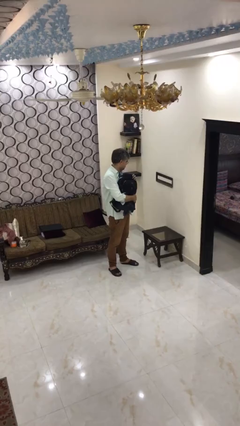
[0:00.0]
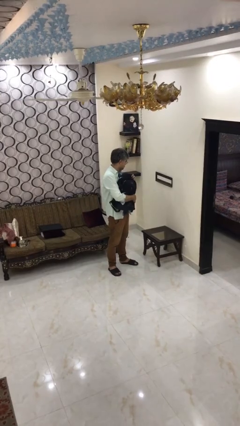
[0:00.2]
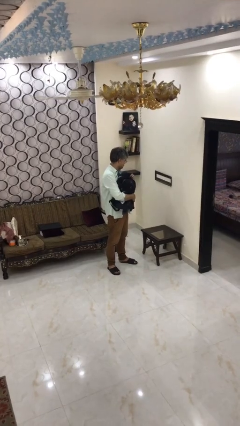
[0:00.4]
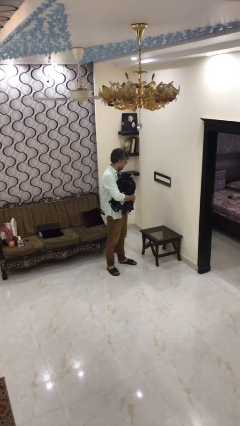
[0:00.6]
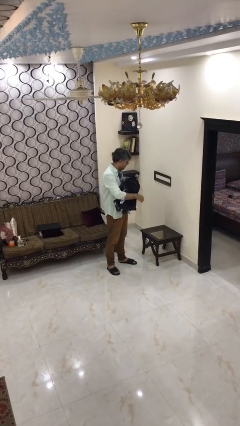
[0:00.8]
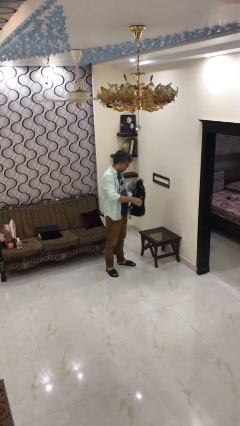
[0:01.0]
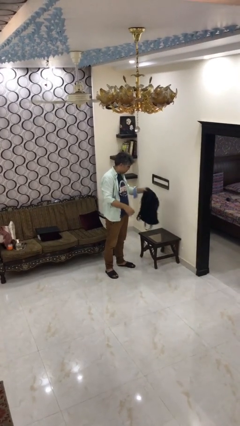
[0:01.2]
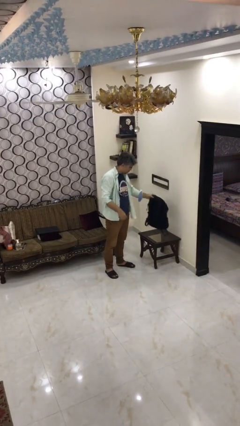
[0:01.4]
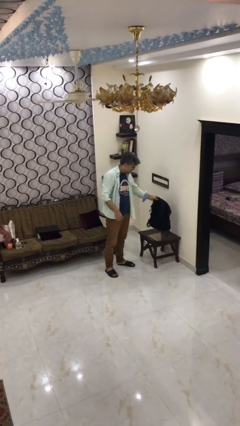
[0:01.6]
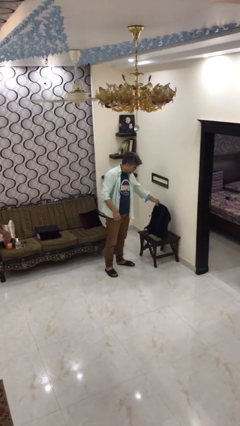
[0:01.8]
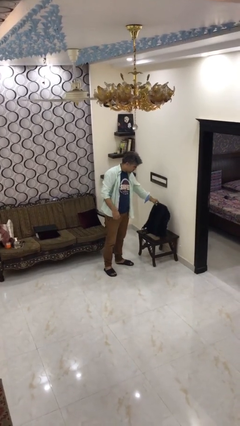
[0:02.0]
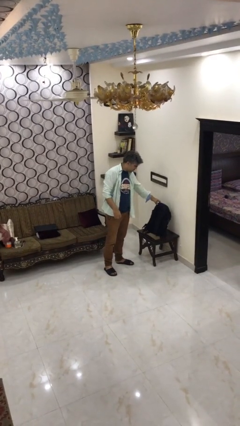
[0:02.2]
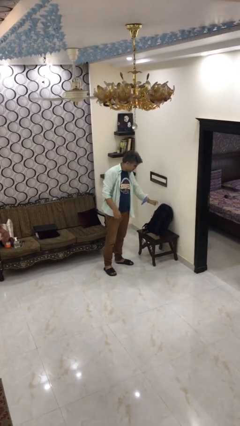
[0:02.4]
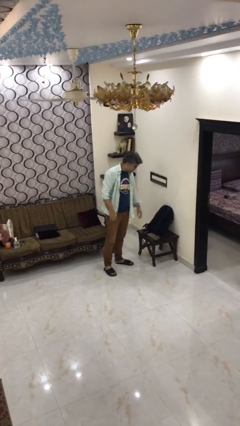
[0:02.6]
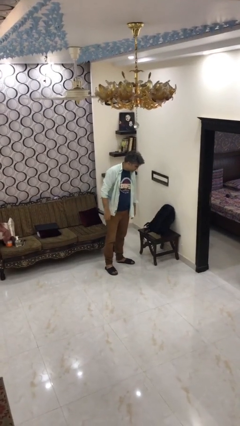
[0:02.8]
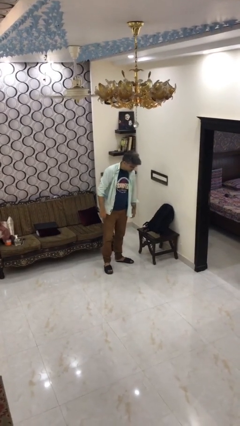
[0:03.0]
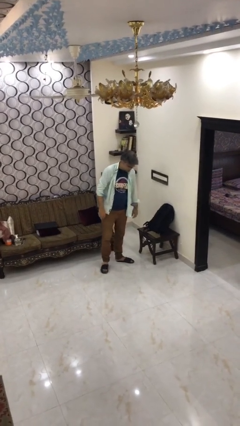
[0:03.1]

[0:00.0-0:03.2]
person puts down object on table

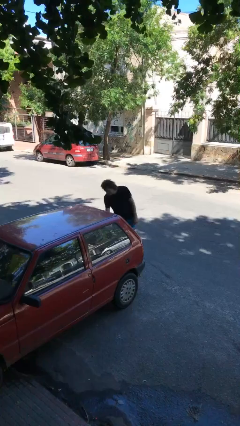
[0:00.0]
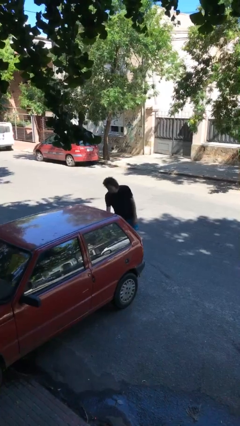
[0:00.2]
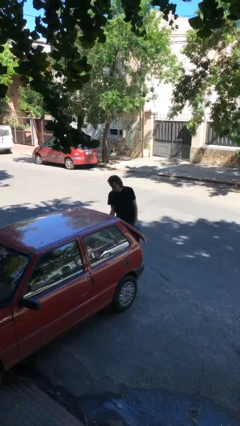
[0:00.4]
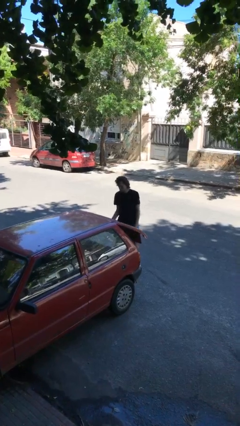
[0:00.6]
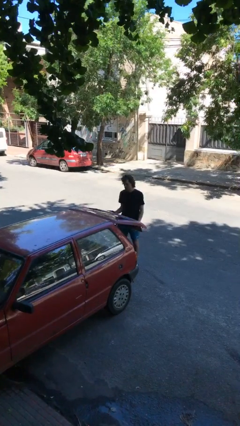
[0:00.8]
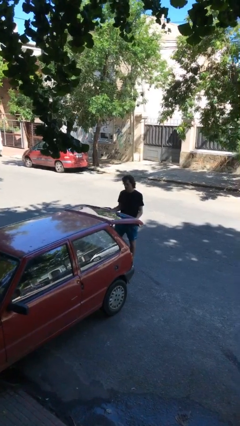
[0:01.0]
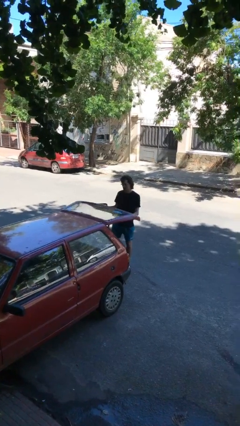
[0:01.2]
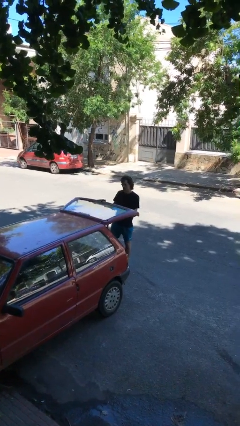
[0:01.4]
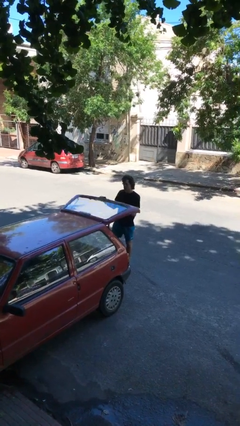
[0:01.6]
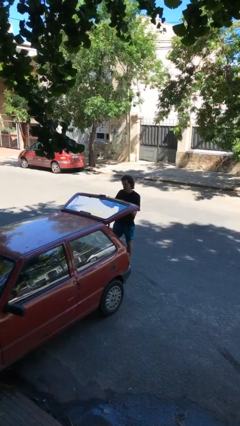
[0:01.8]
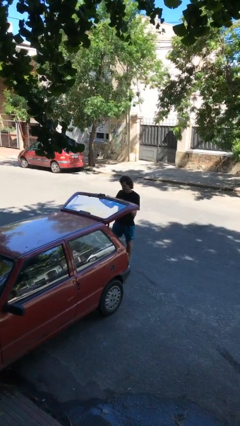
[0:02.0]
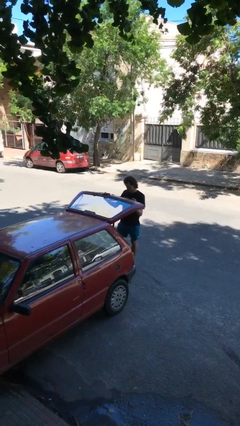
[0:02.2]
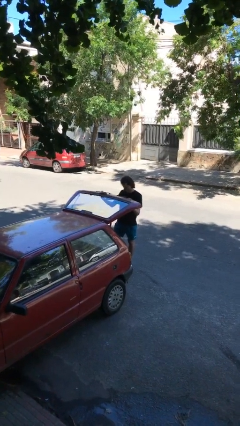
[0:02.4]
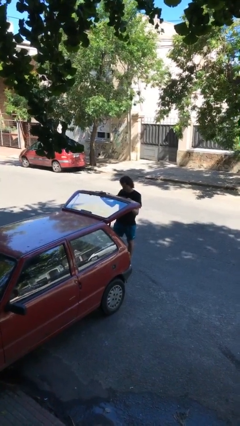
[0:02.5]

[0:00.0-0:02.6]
person opens car trunk

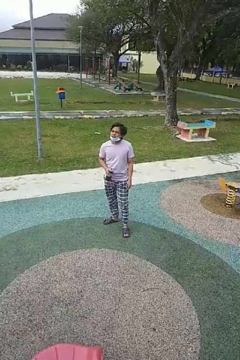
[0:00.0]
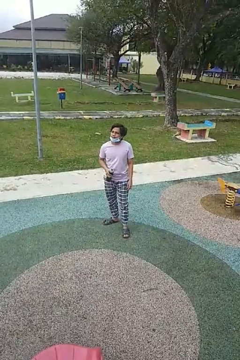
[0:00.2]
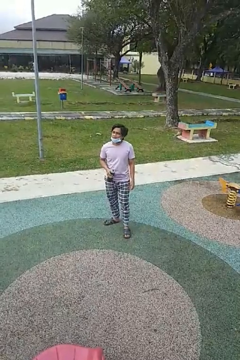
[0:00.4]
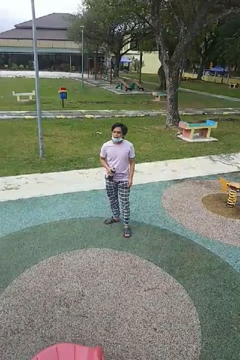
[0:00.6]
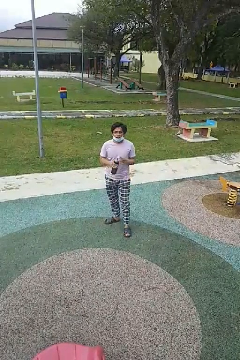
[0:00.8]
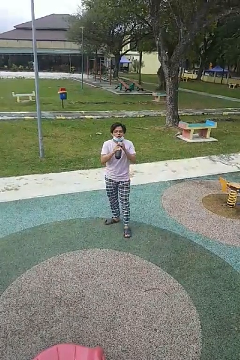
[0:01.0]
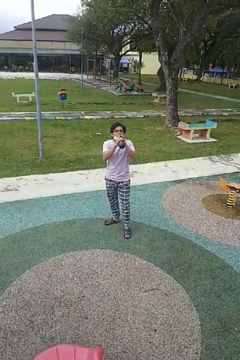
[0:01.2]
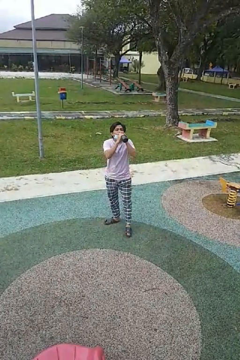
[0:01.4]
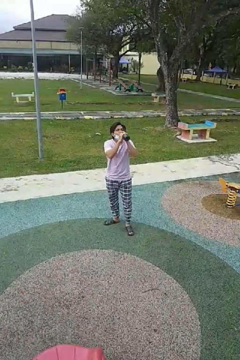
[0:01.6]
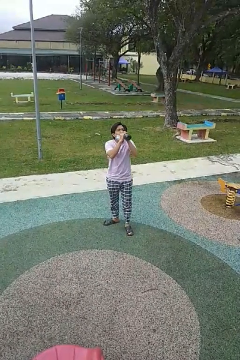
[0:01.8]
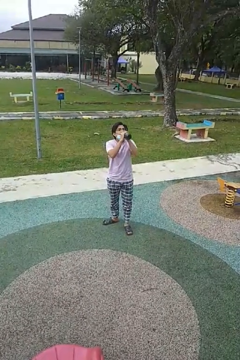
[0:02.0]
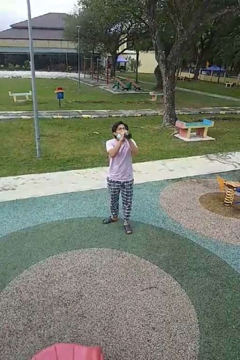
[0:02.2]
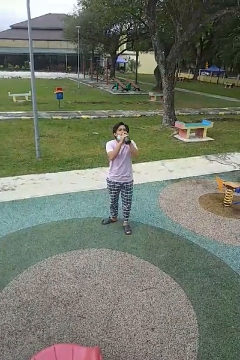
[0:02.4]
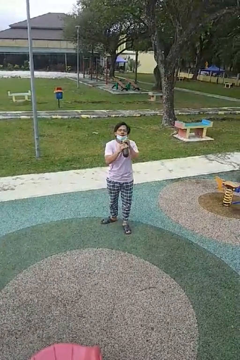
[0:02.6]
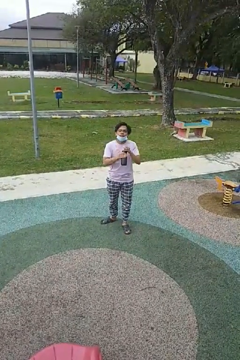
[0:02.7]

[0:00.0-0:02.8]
person drinks from bottle

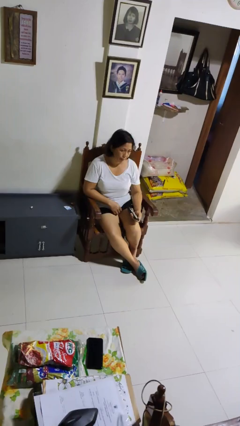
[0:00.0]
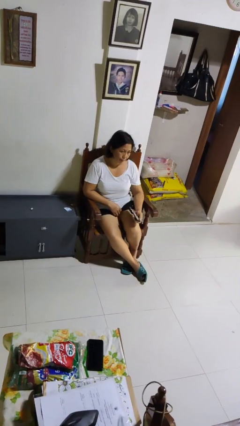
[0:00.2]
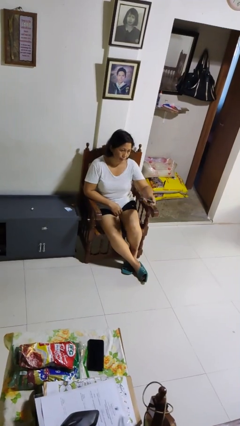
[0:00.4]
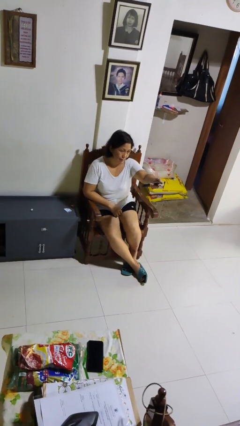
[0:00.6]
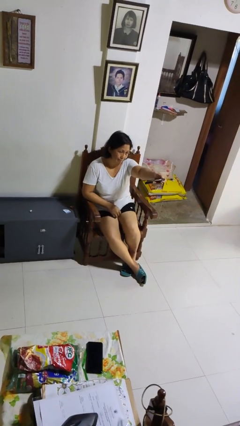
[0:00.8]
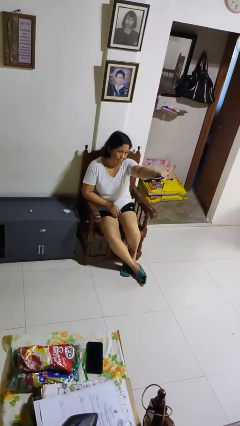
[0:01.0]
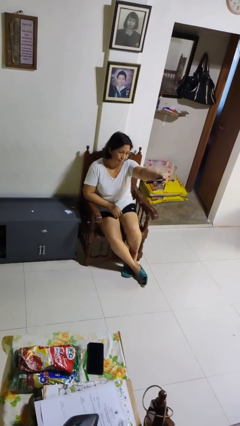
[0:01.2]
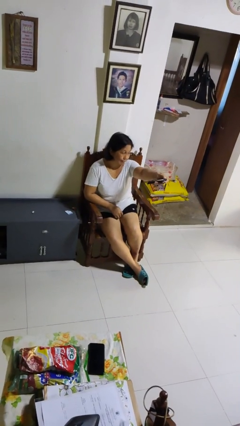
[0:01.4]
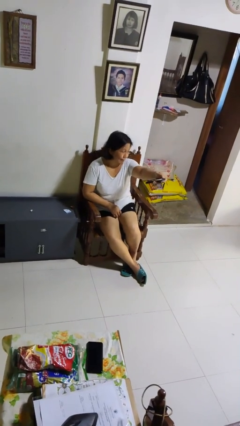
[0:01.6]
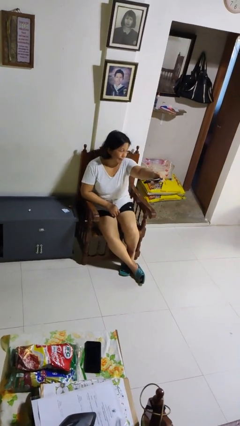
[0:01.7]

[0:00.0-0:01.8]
person uses television remote

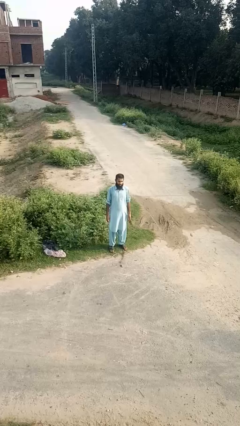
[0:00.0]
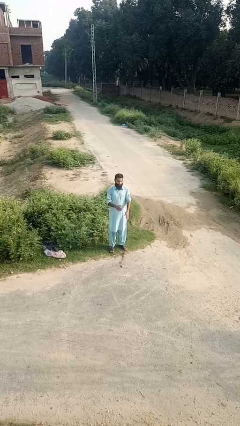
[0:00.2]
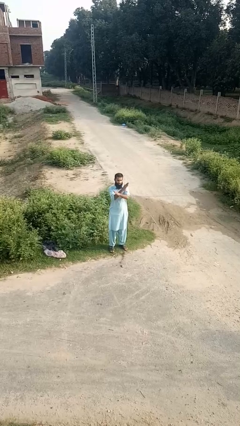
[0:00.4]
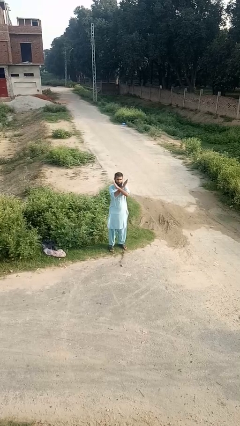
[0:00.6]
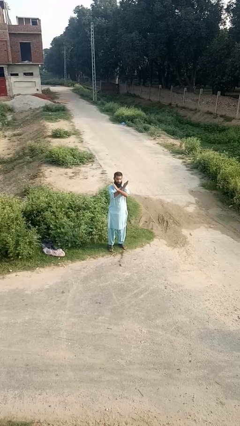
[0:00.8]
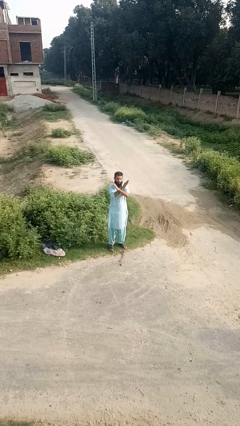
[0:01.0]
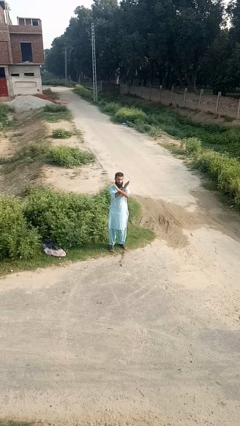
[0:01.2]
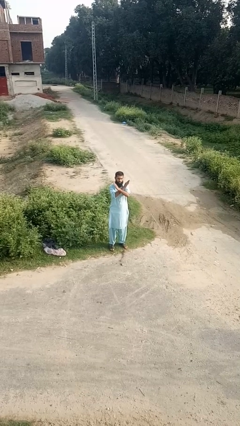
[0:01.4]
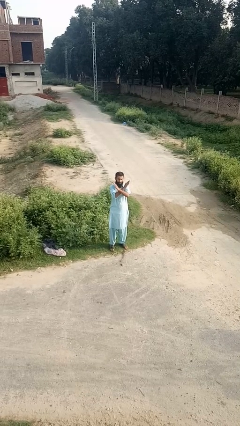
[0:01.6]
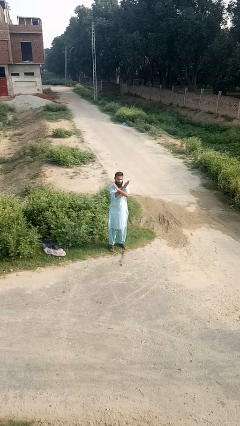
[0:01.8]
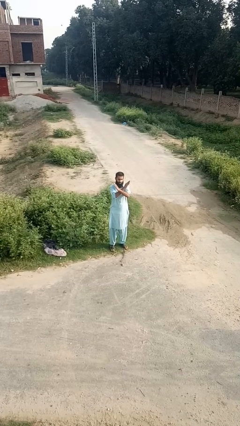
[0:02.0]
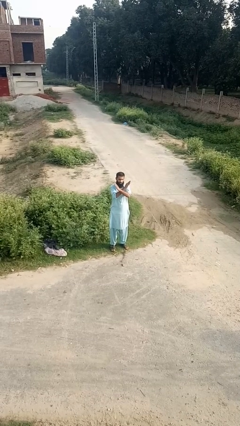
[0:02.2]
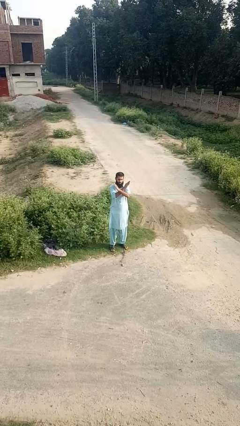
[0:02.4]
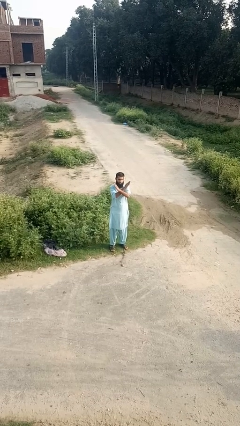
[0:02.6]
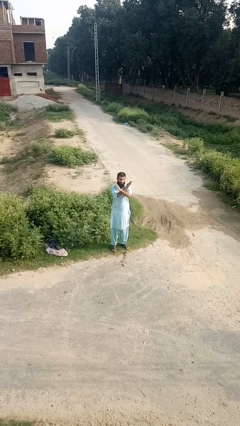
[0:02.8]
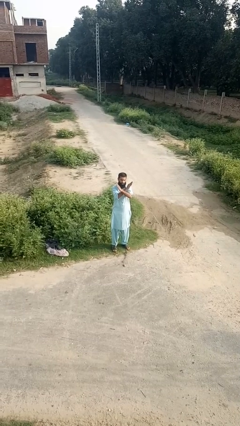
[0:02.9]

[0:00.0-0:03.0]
person crosses arms

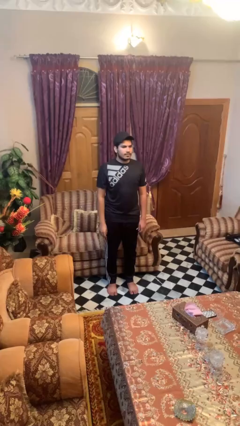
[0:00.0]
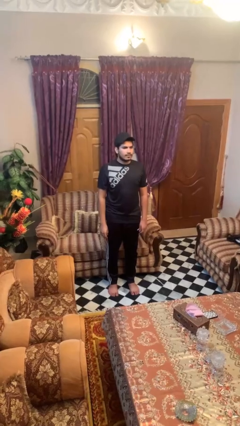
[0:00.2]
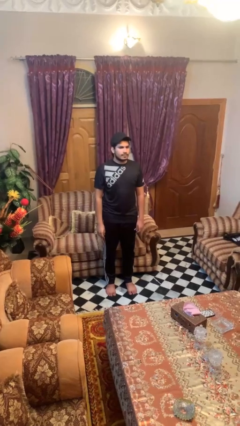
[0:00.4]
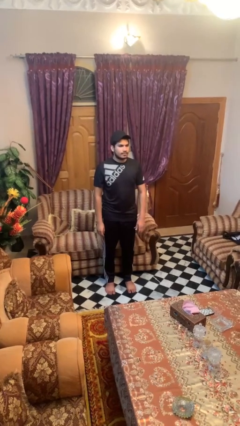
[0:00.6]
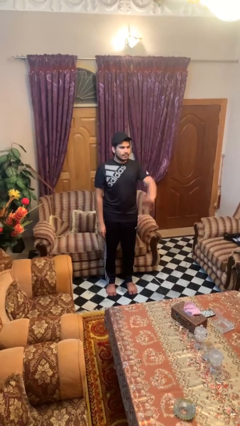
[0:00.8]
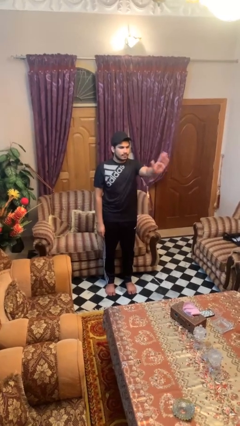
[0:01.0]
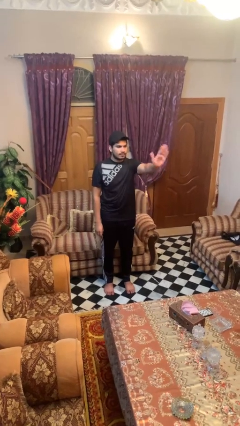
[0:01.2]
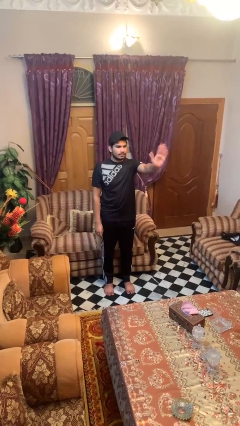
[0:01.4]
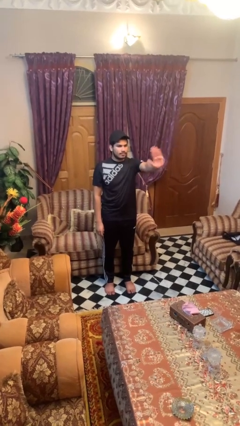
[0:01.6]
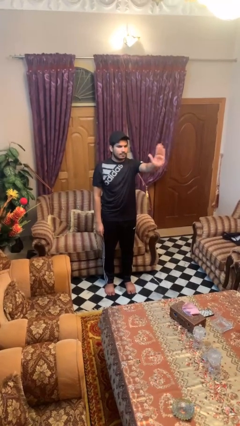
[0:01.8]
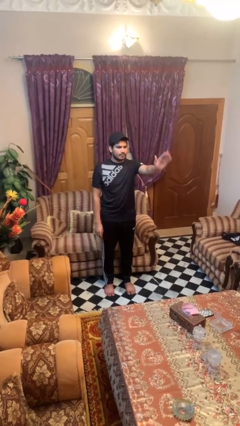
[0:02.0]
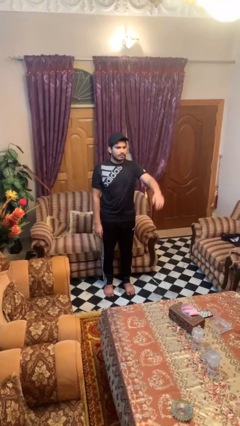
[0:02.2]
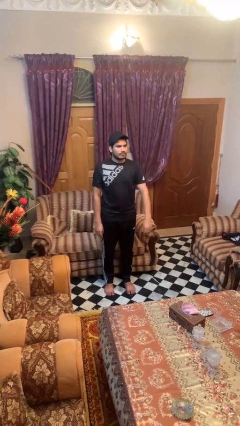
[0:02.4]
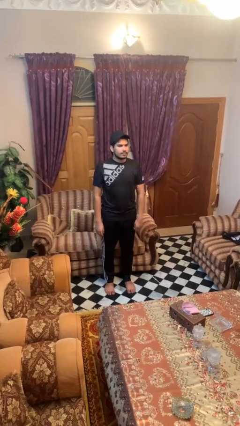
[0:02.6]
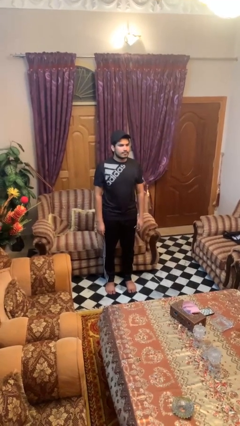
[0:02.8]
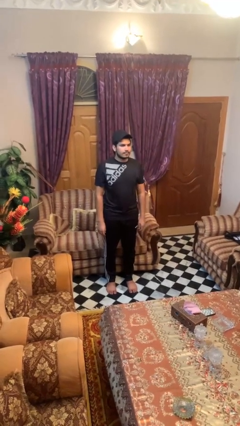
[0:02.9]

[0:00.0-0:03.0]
person waves at person

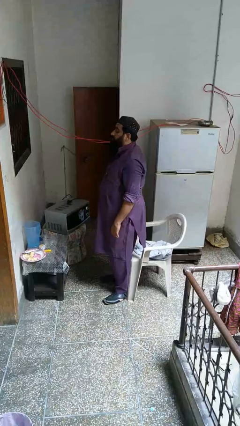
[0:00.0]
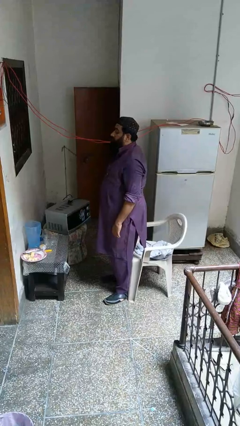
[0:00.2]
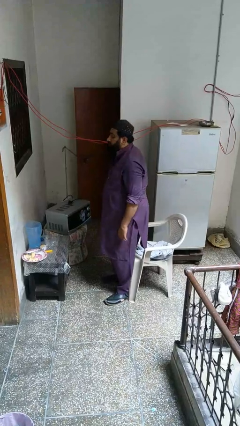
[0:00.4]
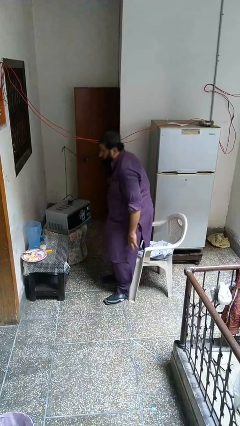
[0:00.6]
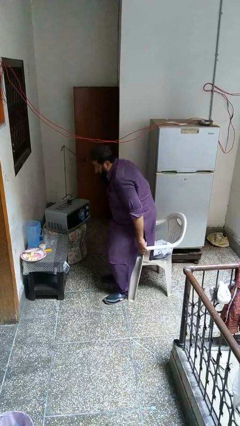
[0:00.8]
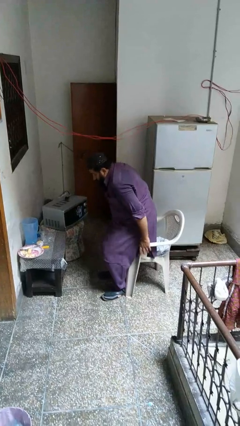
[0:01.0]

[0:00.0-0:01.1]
person sits down
